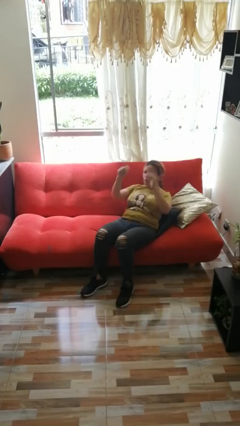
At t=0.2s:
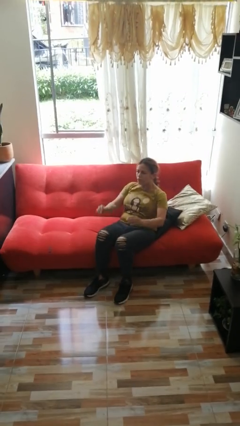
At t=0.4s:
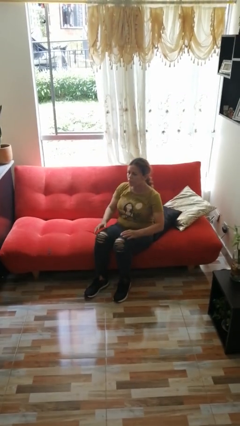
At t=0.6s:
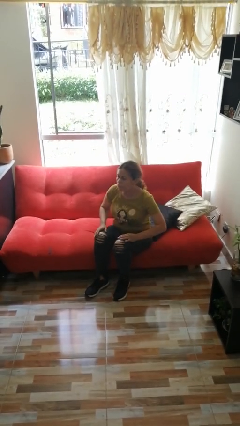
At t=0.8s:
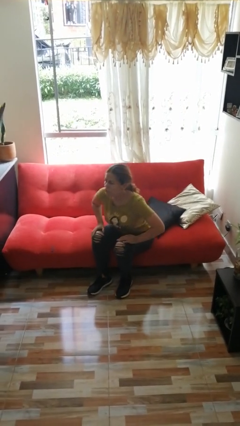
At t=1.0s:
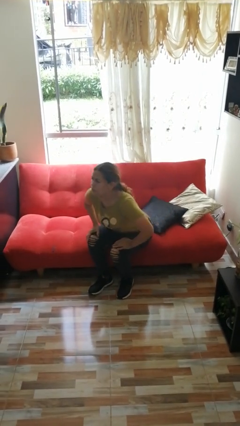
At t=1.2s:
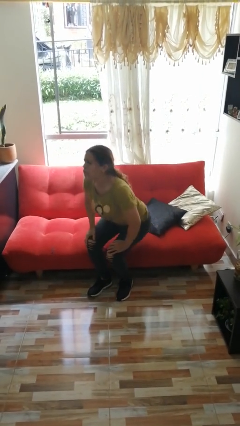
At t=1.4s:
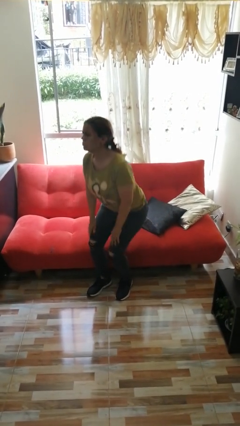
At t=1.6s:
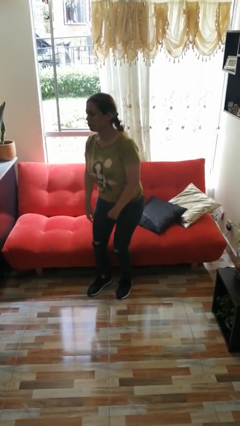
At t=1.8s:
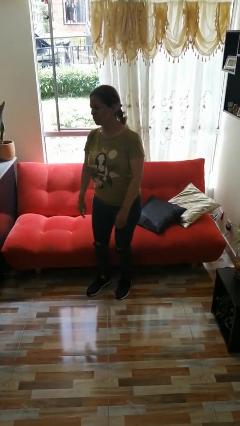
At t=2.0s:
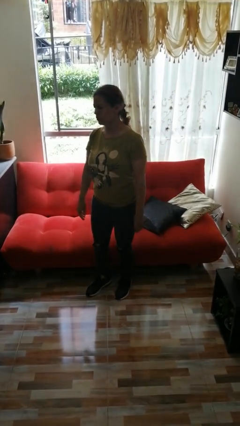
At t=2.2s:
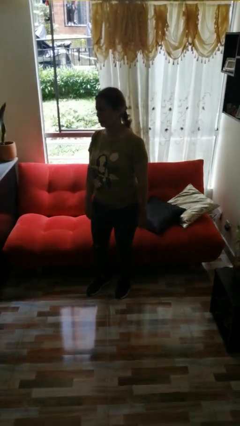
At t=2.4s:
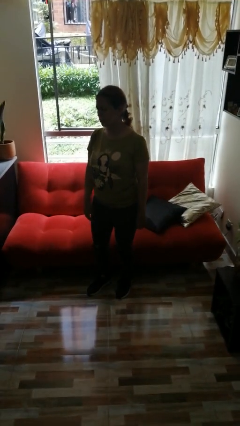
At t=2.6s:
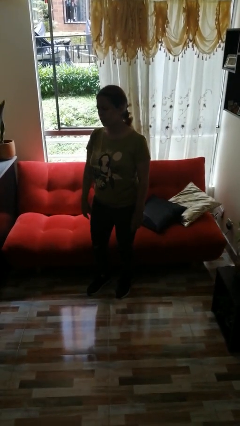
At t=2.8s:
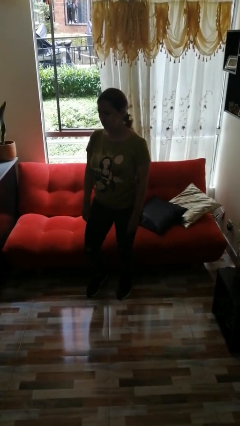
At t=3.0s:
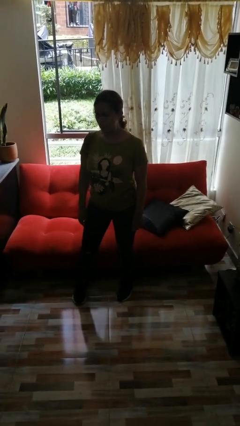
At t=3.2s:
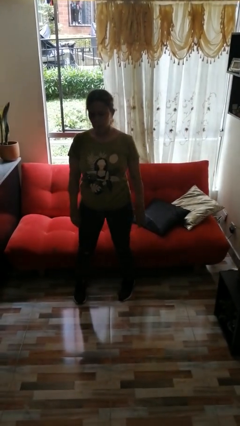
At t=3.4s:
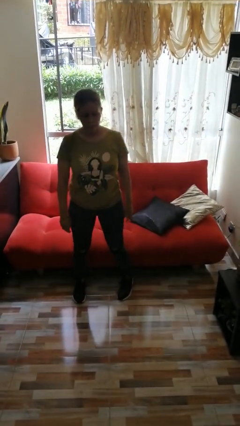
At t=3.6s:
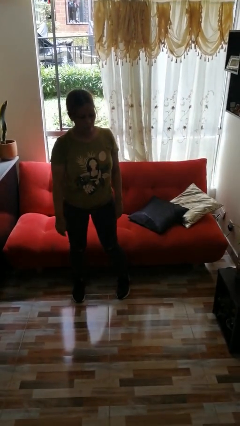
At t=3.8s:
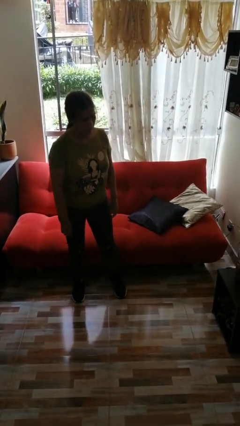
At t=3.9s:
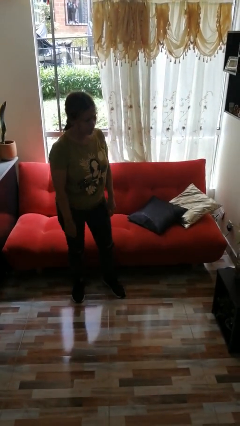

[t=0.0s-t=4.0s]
person stands up

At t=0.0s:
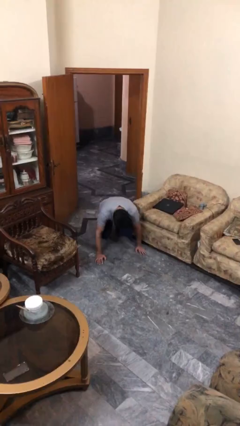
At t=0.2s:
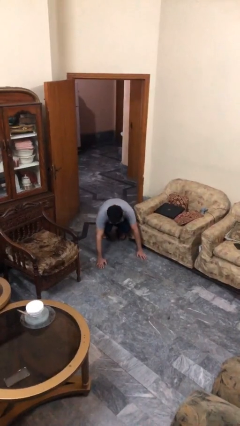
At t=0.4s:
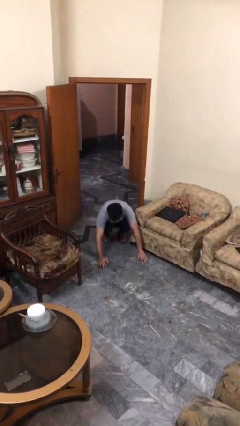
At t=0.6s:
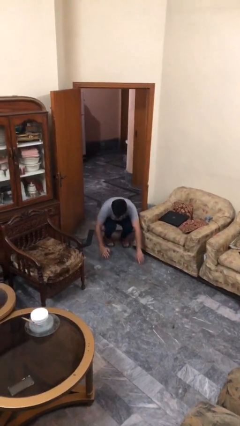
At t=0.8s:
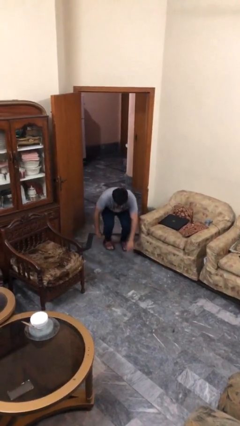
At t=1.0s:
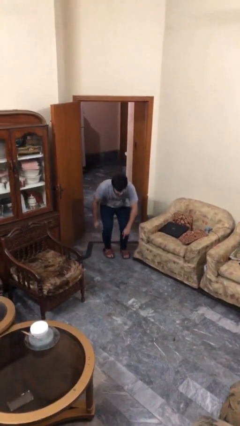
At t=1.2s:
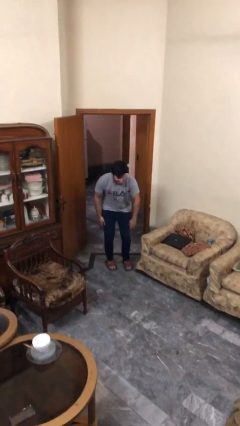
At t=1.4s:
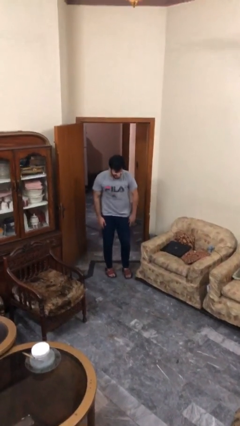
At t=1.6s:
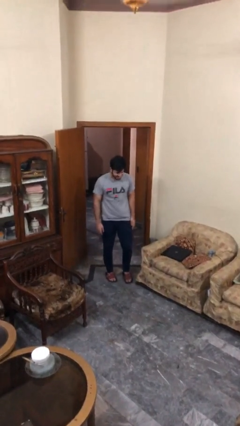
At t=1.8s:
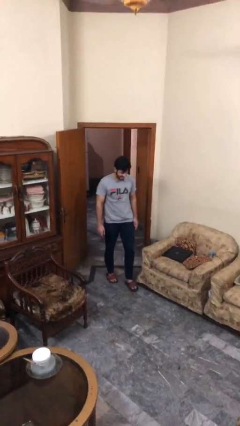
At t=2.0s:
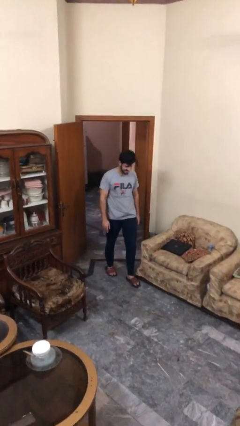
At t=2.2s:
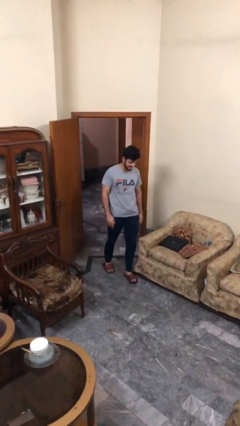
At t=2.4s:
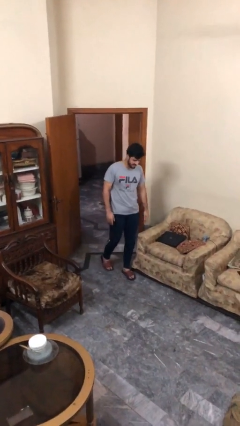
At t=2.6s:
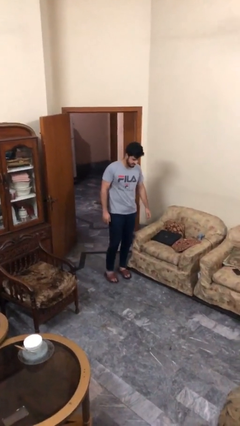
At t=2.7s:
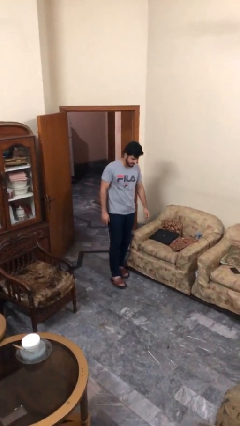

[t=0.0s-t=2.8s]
person stands up from floor

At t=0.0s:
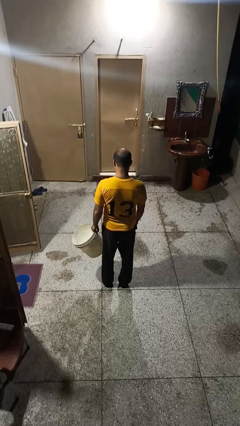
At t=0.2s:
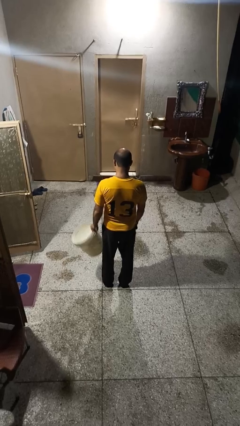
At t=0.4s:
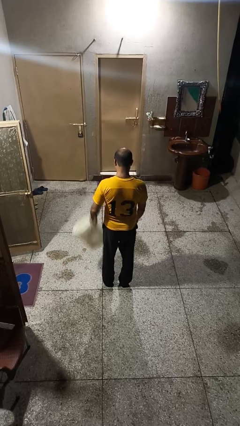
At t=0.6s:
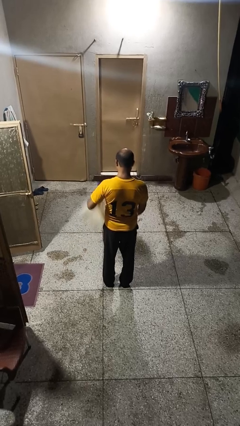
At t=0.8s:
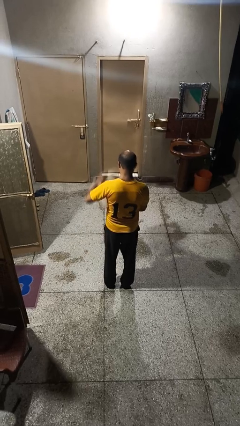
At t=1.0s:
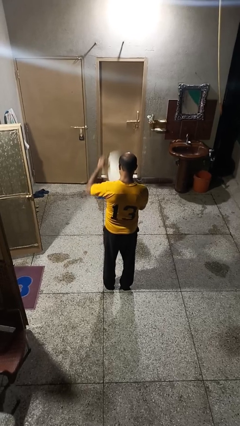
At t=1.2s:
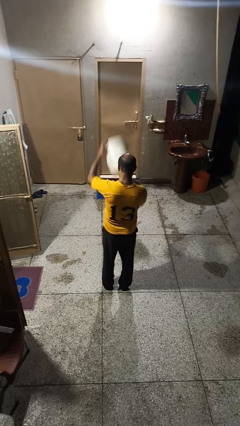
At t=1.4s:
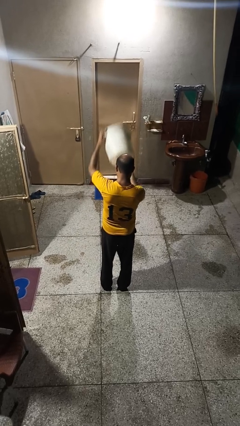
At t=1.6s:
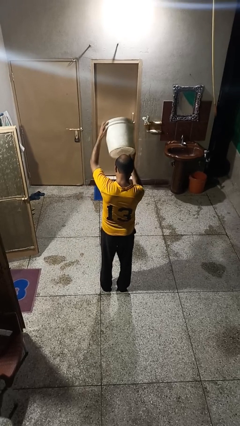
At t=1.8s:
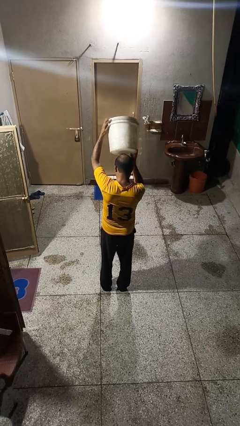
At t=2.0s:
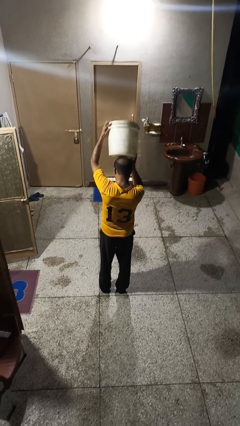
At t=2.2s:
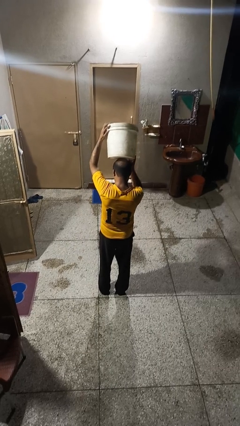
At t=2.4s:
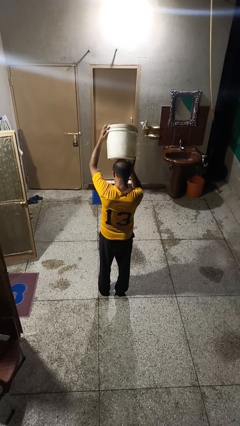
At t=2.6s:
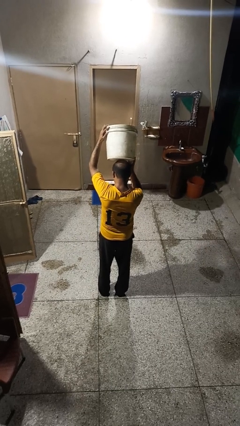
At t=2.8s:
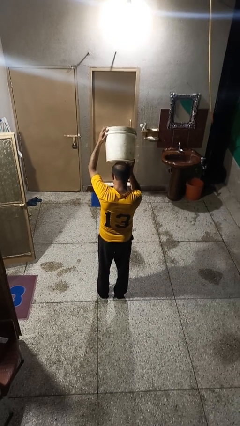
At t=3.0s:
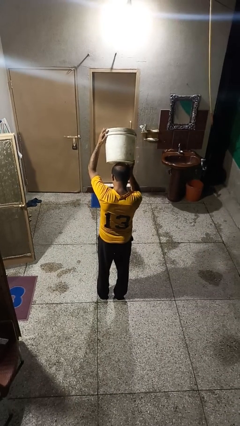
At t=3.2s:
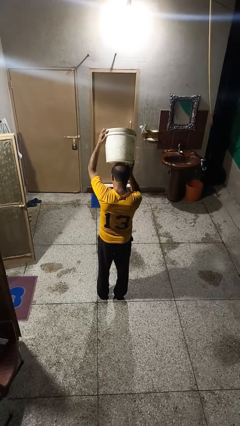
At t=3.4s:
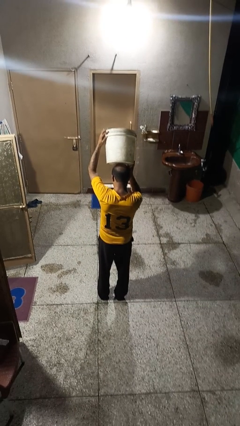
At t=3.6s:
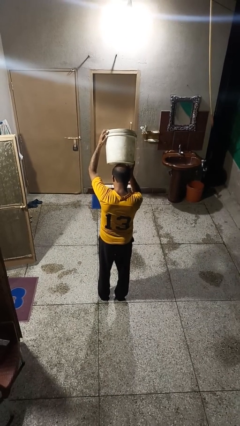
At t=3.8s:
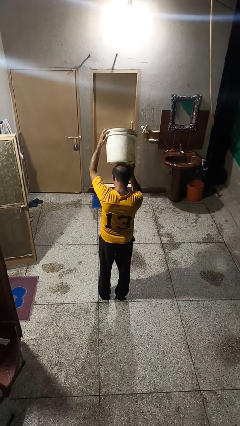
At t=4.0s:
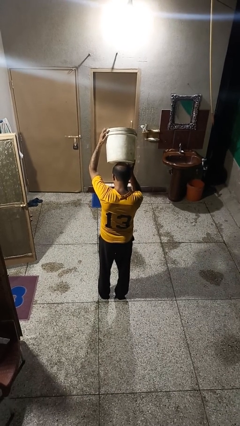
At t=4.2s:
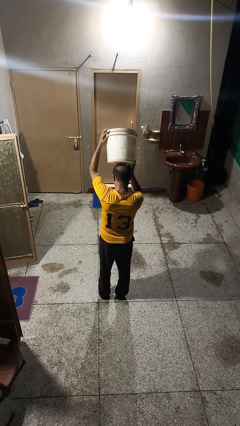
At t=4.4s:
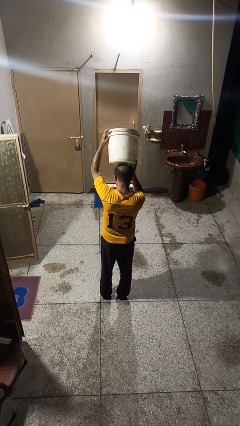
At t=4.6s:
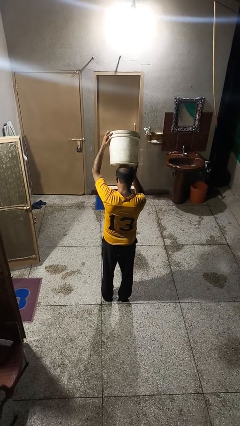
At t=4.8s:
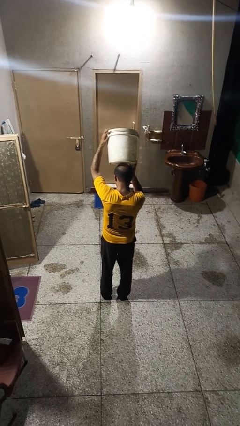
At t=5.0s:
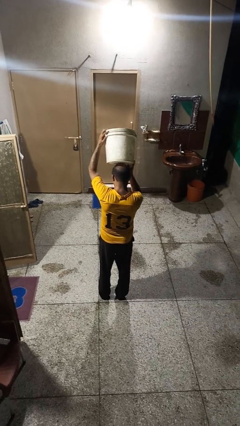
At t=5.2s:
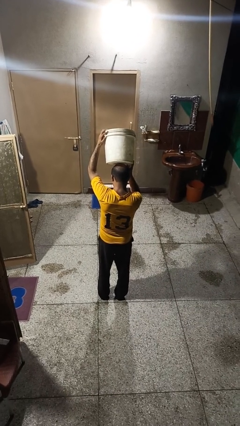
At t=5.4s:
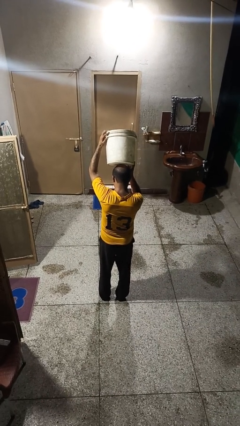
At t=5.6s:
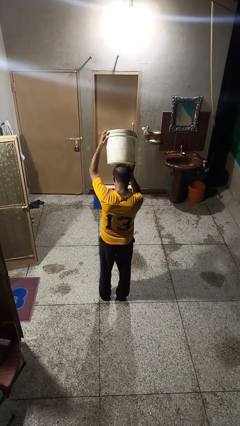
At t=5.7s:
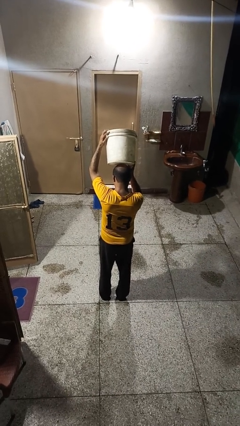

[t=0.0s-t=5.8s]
person holds object above head

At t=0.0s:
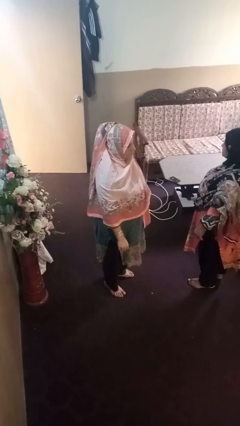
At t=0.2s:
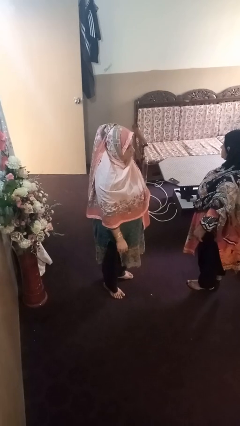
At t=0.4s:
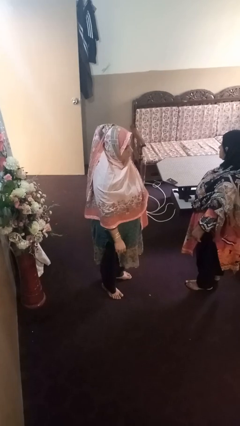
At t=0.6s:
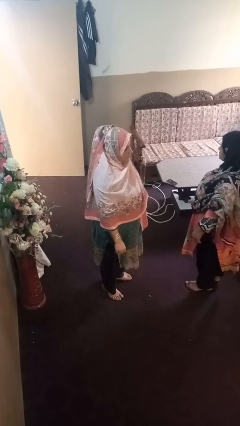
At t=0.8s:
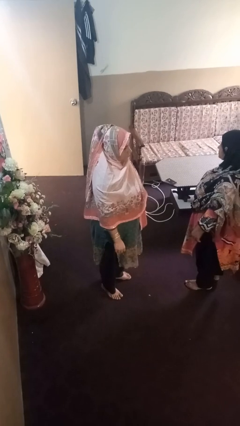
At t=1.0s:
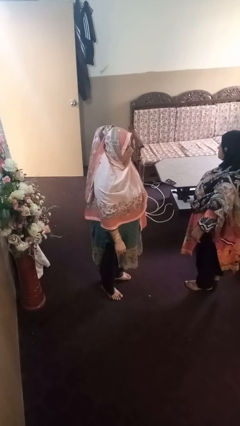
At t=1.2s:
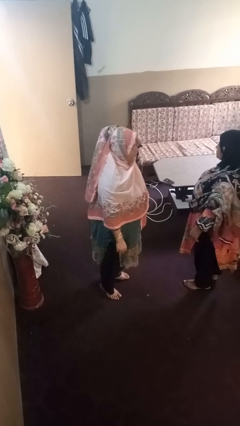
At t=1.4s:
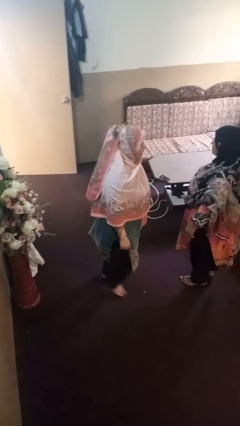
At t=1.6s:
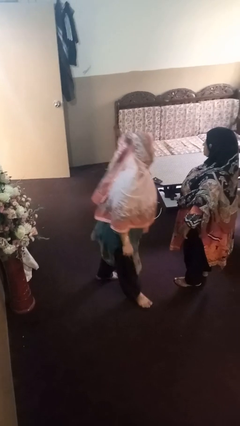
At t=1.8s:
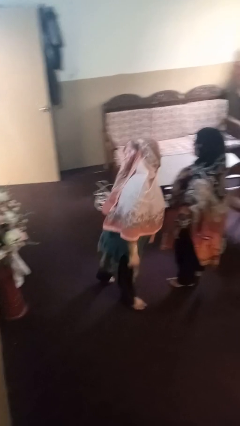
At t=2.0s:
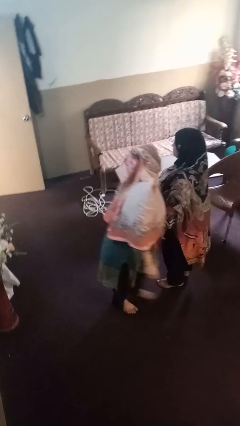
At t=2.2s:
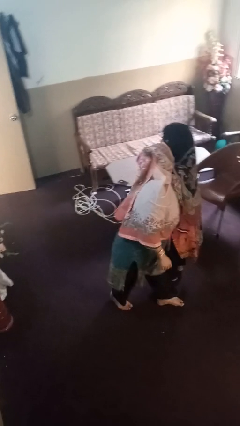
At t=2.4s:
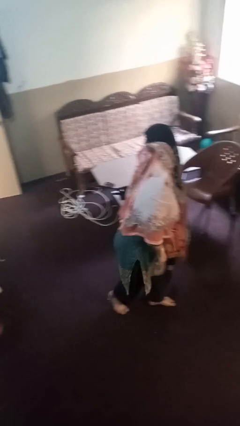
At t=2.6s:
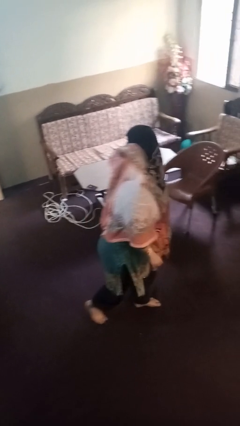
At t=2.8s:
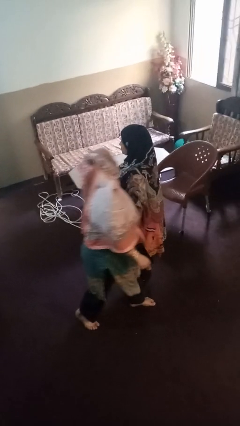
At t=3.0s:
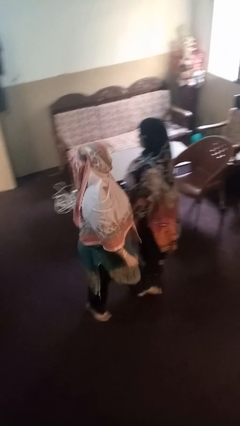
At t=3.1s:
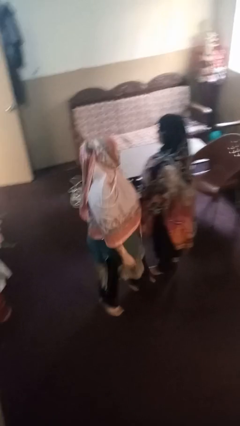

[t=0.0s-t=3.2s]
person laughs with person

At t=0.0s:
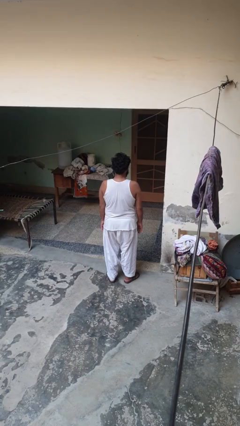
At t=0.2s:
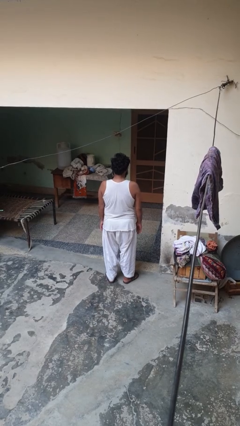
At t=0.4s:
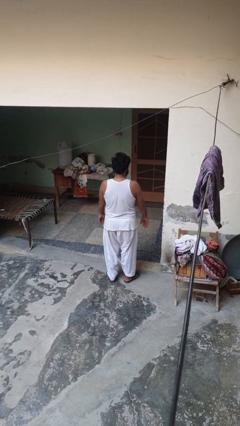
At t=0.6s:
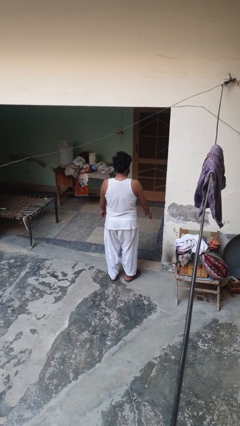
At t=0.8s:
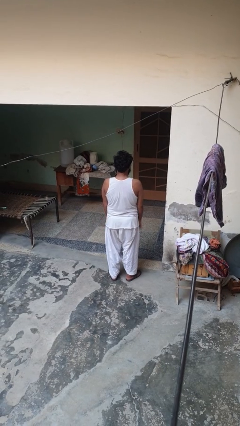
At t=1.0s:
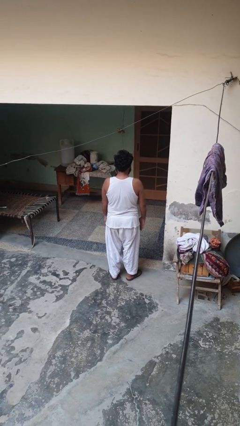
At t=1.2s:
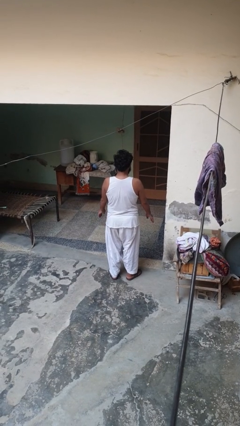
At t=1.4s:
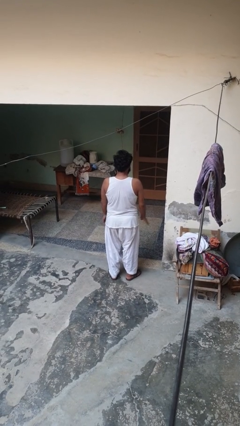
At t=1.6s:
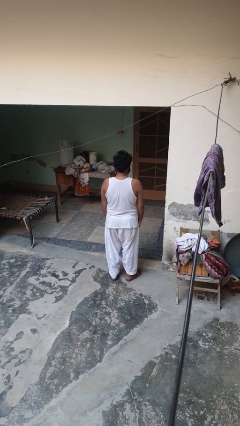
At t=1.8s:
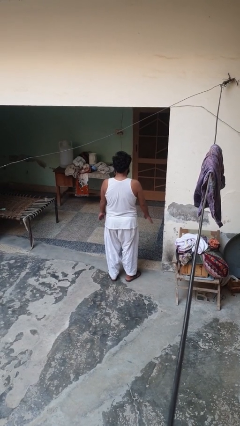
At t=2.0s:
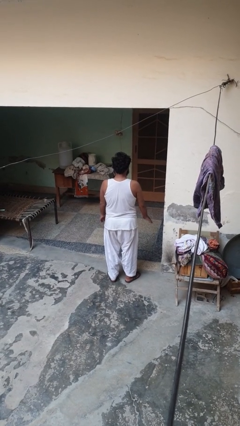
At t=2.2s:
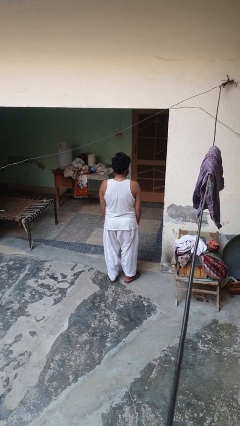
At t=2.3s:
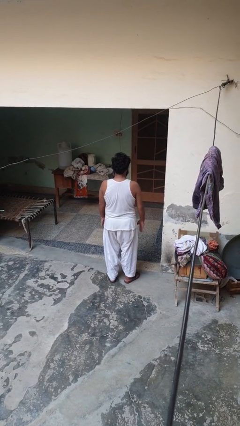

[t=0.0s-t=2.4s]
person slaps hands on thighs
